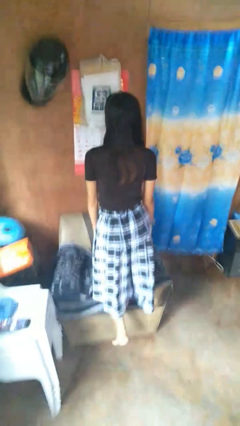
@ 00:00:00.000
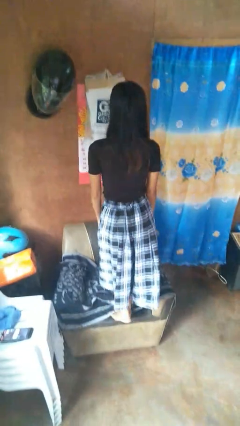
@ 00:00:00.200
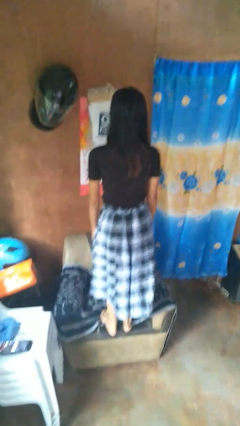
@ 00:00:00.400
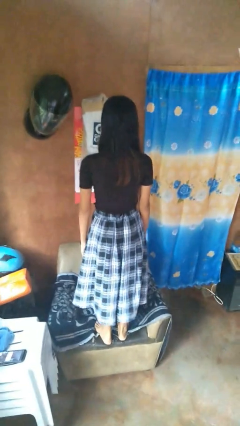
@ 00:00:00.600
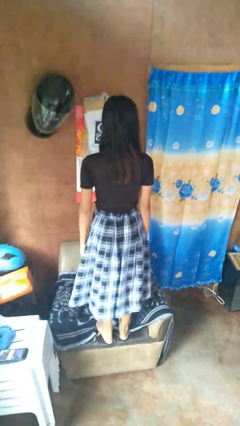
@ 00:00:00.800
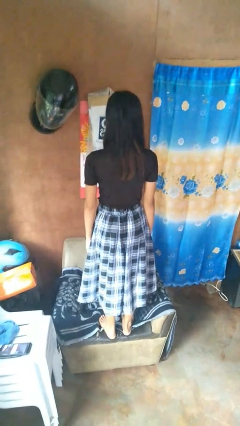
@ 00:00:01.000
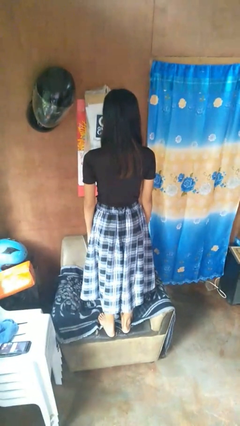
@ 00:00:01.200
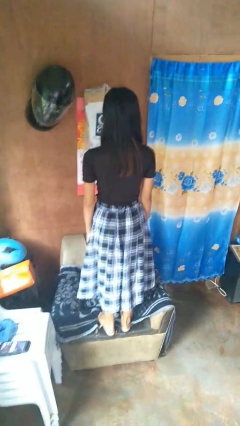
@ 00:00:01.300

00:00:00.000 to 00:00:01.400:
person climbs on couch

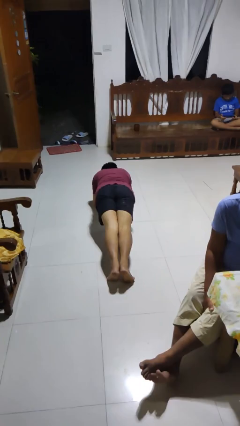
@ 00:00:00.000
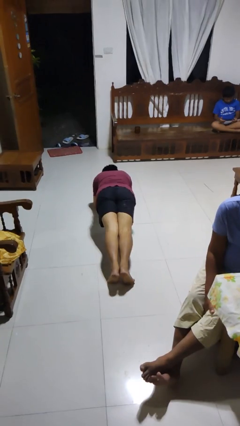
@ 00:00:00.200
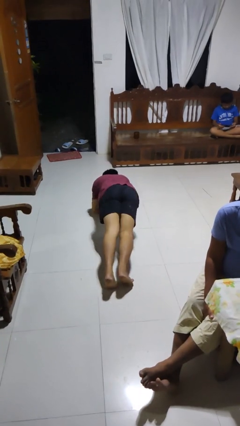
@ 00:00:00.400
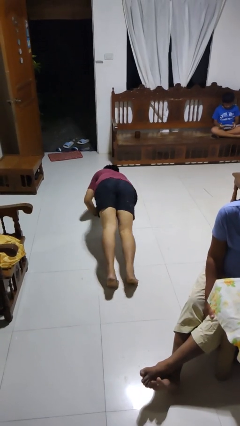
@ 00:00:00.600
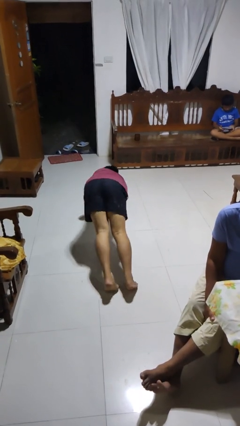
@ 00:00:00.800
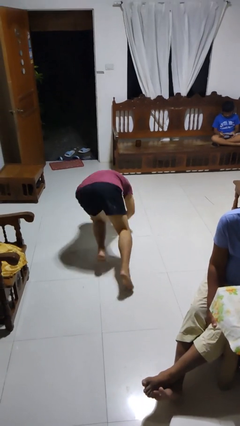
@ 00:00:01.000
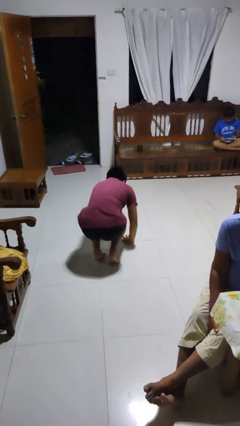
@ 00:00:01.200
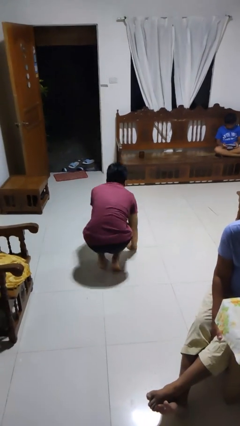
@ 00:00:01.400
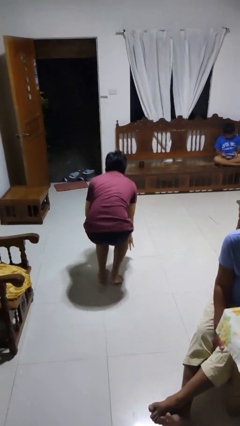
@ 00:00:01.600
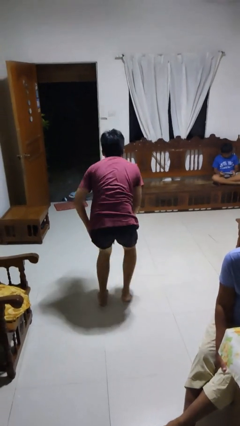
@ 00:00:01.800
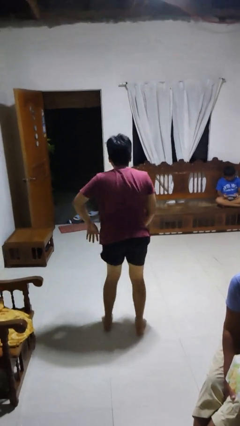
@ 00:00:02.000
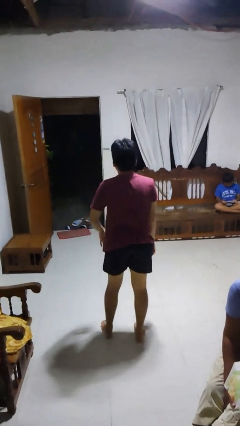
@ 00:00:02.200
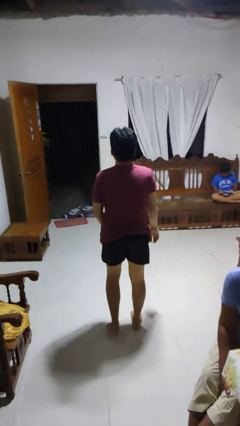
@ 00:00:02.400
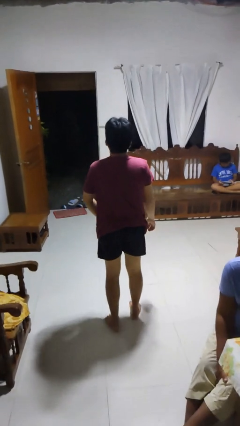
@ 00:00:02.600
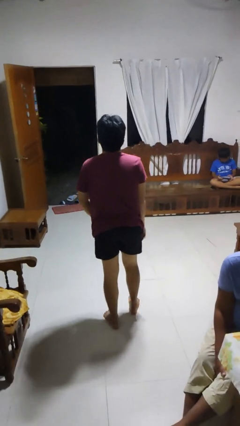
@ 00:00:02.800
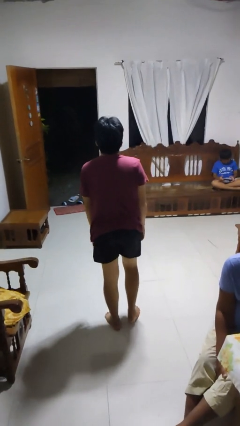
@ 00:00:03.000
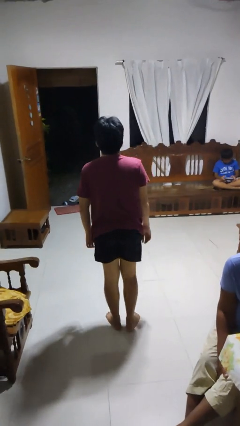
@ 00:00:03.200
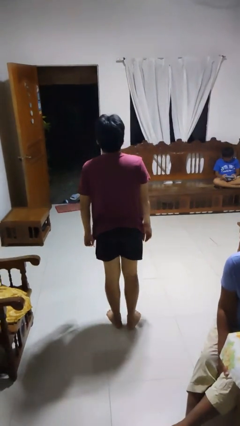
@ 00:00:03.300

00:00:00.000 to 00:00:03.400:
person stands up from floor

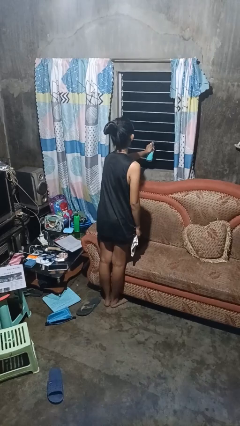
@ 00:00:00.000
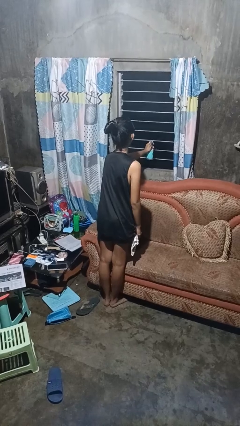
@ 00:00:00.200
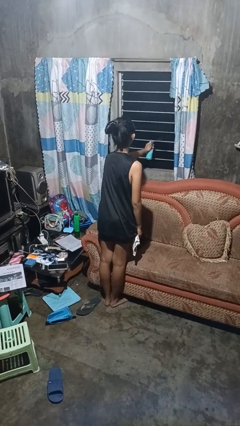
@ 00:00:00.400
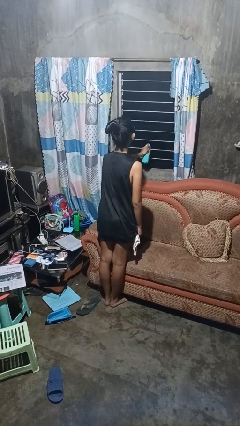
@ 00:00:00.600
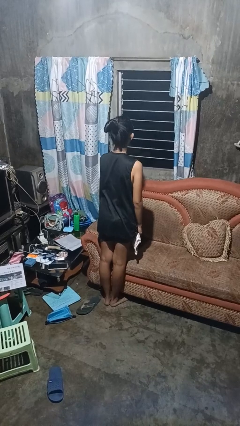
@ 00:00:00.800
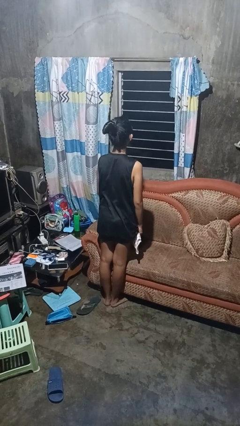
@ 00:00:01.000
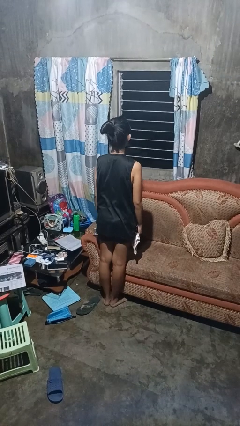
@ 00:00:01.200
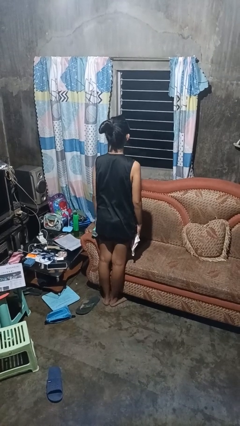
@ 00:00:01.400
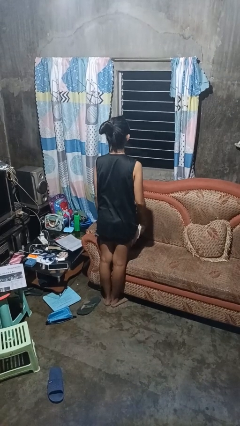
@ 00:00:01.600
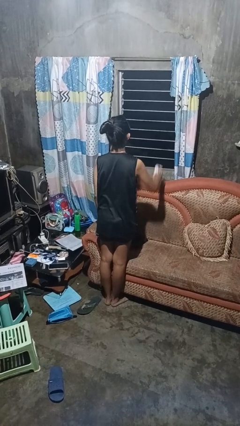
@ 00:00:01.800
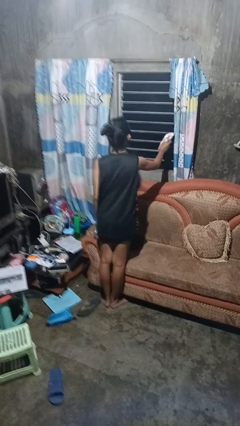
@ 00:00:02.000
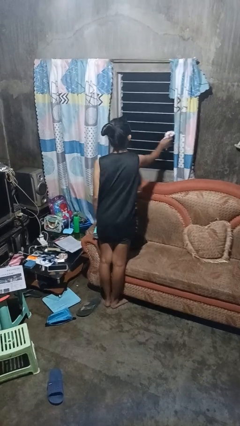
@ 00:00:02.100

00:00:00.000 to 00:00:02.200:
person sprays from bottle

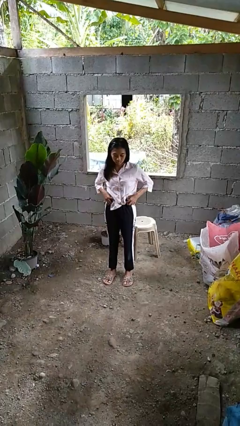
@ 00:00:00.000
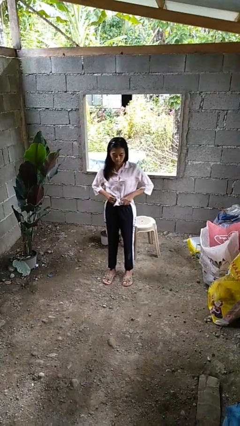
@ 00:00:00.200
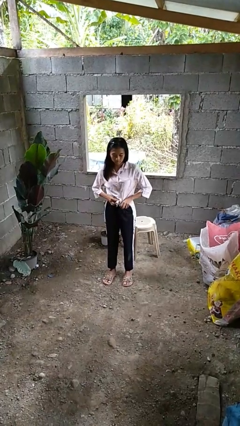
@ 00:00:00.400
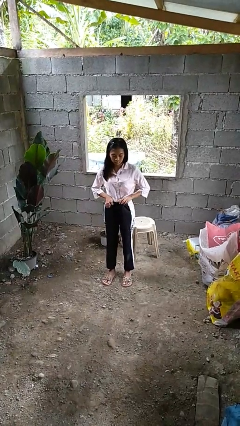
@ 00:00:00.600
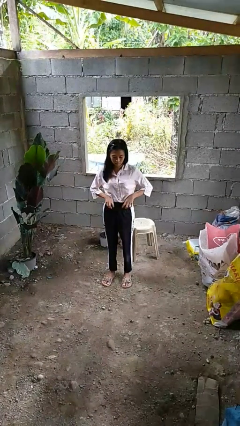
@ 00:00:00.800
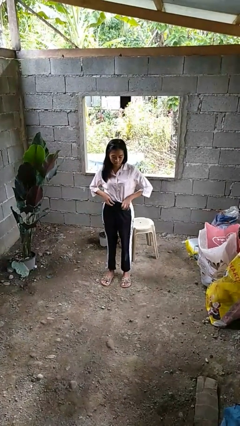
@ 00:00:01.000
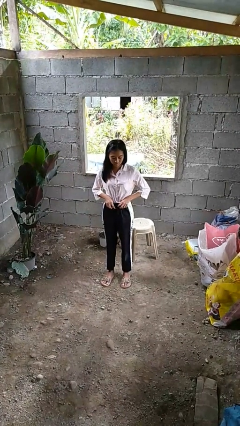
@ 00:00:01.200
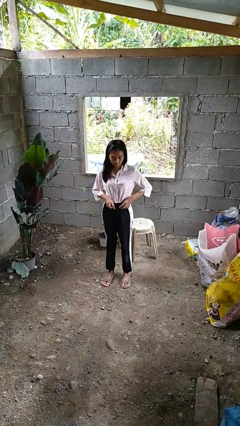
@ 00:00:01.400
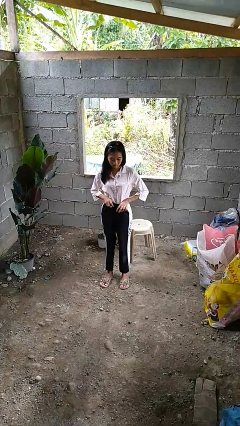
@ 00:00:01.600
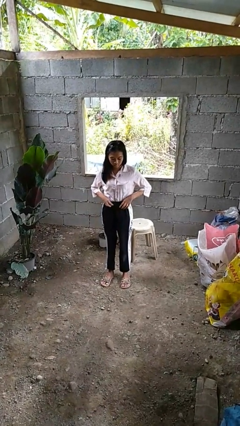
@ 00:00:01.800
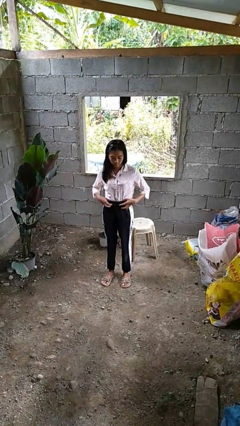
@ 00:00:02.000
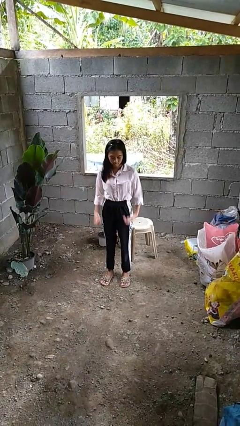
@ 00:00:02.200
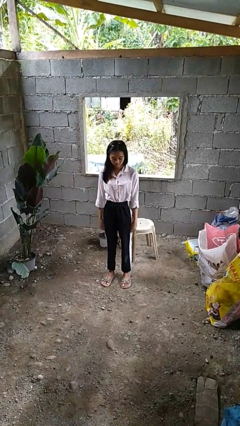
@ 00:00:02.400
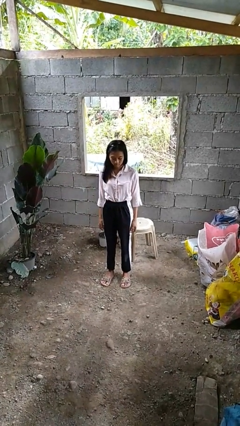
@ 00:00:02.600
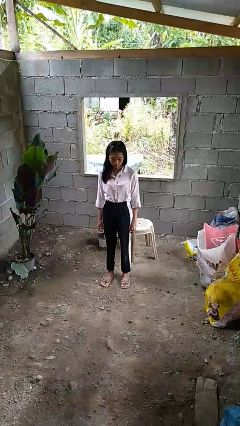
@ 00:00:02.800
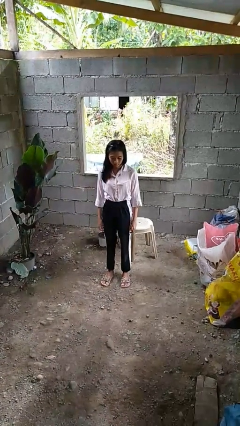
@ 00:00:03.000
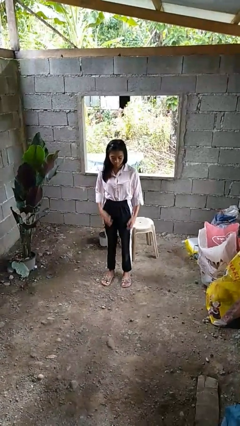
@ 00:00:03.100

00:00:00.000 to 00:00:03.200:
person tucks in shirt

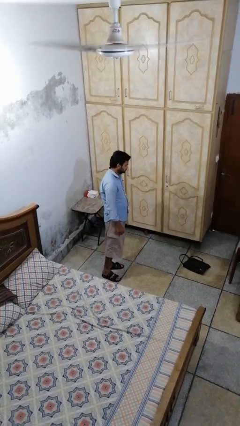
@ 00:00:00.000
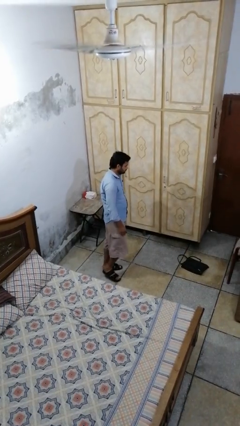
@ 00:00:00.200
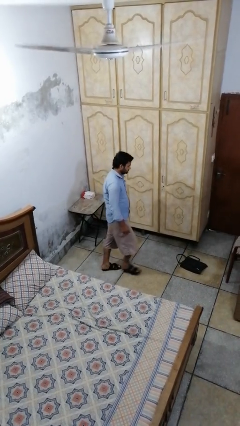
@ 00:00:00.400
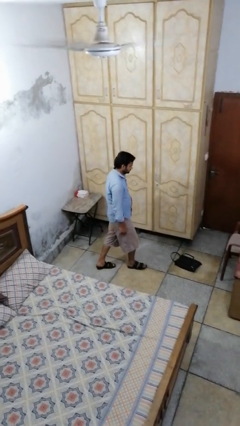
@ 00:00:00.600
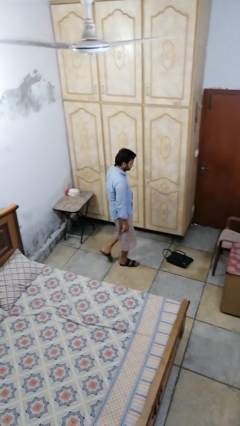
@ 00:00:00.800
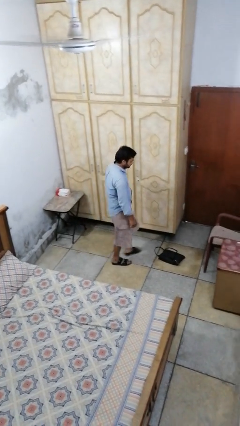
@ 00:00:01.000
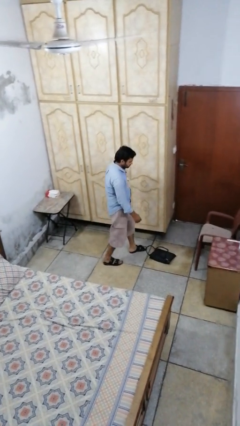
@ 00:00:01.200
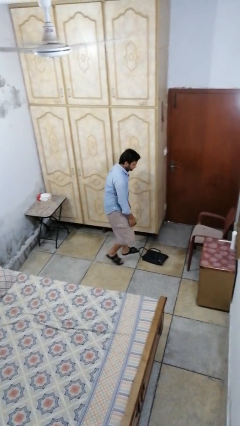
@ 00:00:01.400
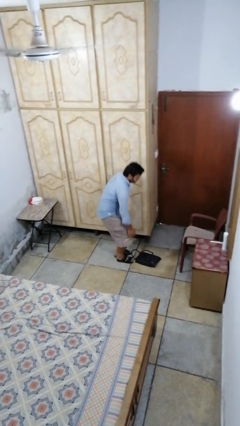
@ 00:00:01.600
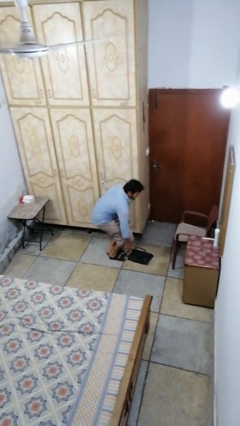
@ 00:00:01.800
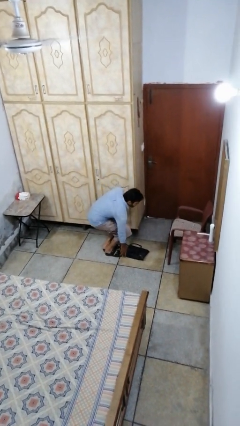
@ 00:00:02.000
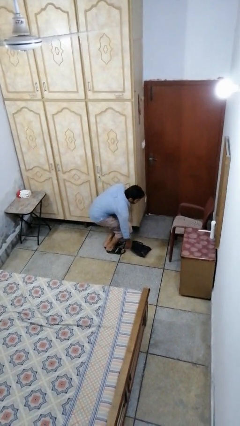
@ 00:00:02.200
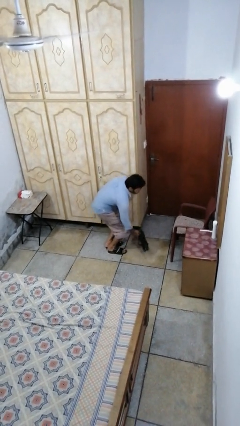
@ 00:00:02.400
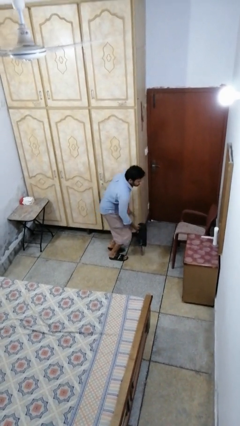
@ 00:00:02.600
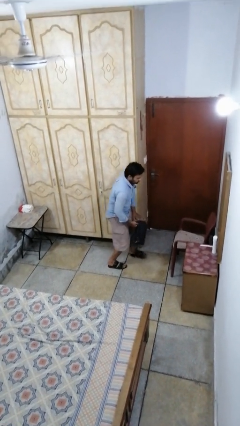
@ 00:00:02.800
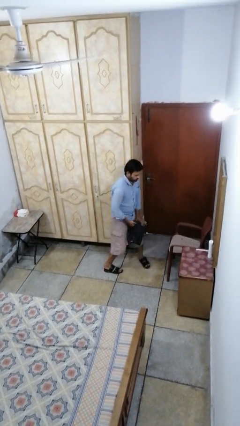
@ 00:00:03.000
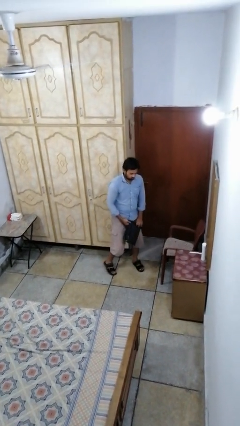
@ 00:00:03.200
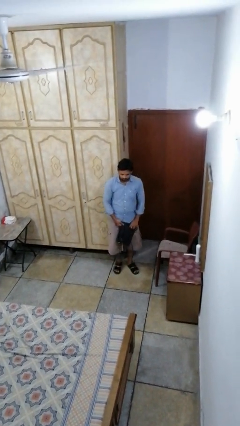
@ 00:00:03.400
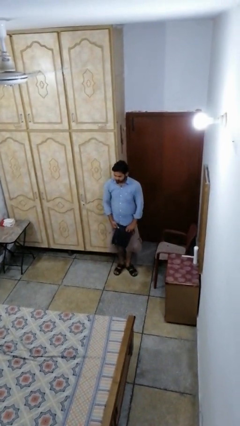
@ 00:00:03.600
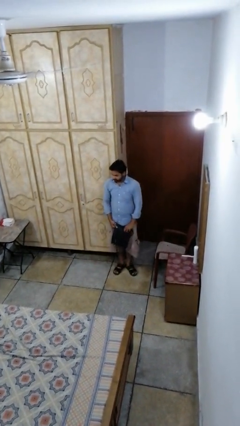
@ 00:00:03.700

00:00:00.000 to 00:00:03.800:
person picks up object from floor

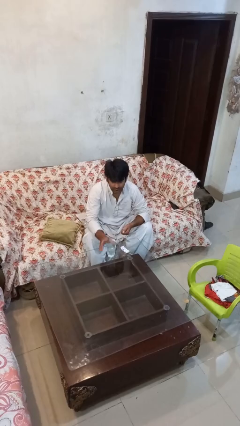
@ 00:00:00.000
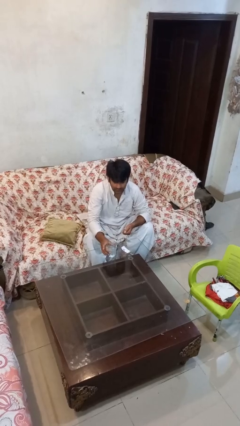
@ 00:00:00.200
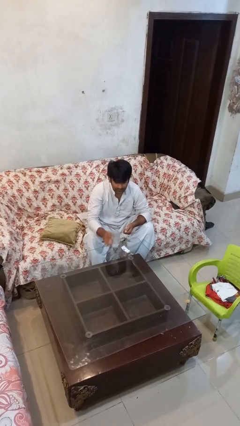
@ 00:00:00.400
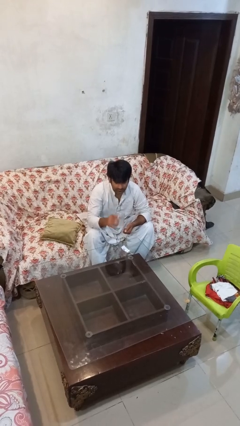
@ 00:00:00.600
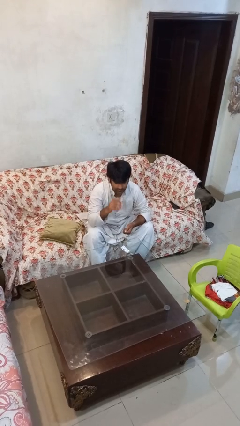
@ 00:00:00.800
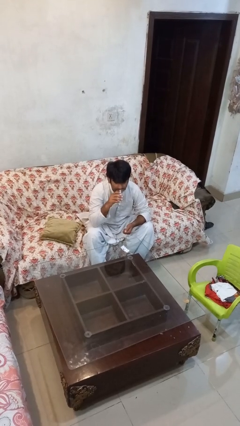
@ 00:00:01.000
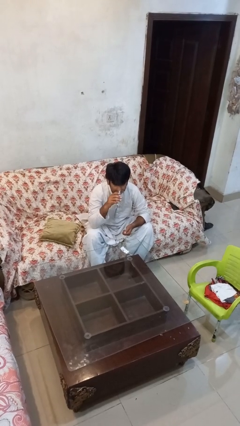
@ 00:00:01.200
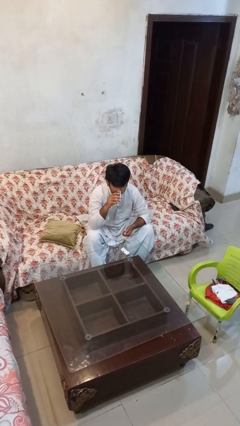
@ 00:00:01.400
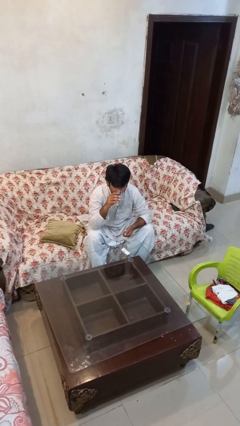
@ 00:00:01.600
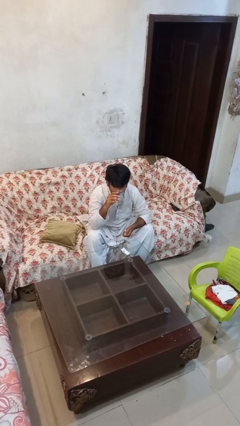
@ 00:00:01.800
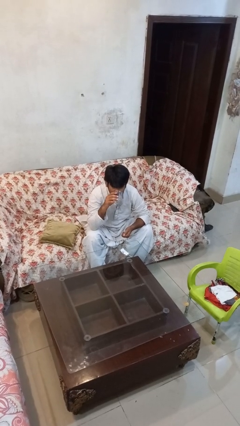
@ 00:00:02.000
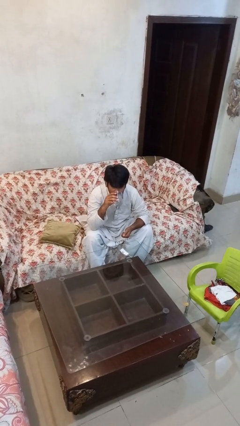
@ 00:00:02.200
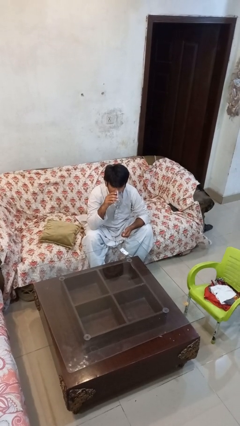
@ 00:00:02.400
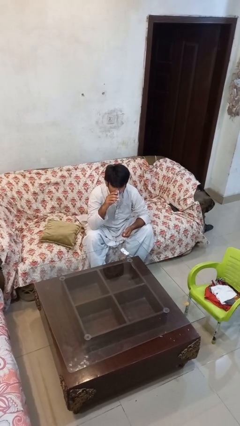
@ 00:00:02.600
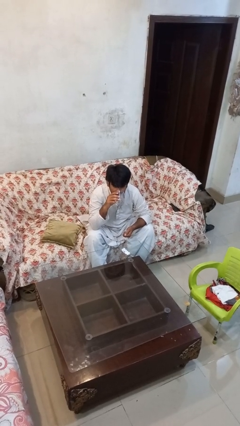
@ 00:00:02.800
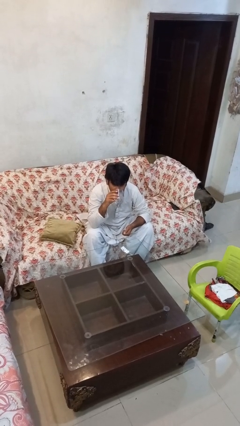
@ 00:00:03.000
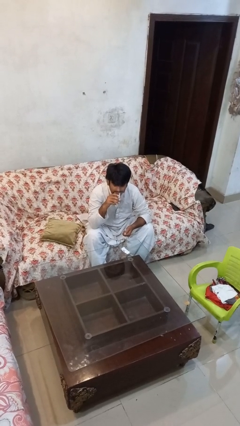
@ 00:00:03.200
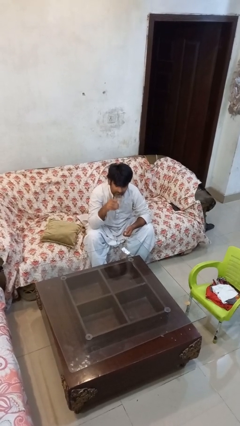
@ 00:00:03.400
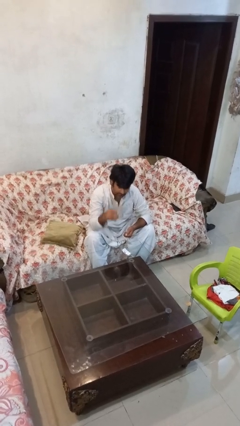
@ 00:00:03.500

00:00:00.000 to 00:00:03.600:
person drinks from cup
